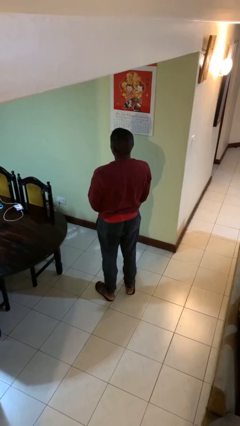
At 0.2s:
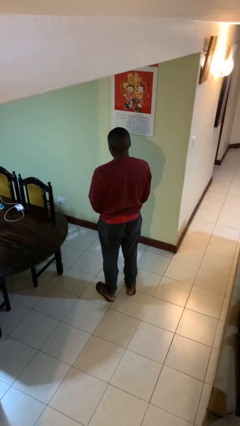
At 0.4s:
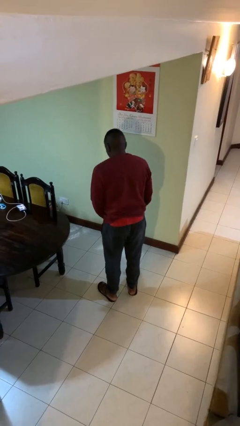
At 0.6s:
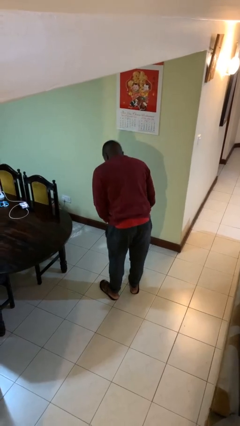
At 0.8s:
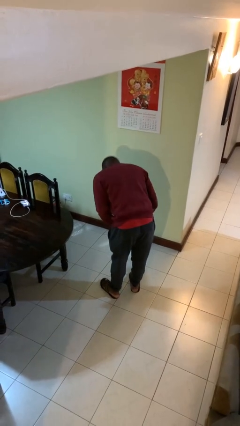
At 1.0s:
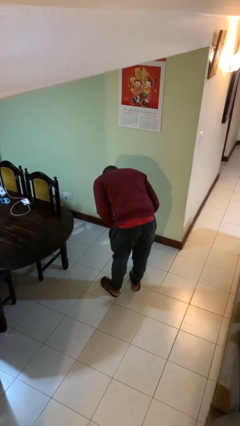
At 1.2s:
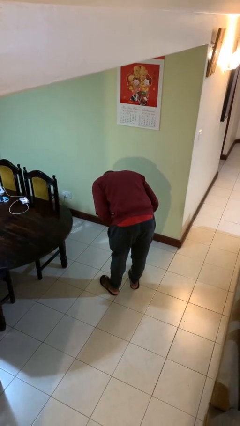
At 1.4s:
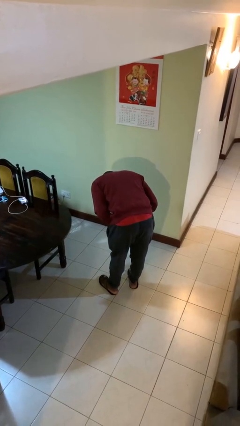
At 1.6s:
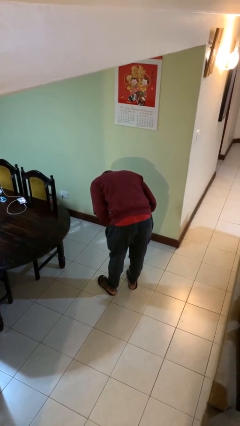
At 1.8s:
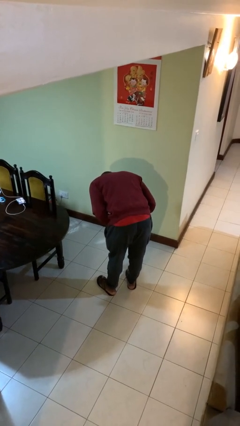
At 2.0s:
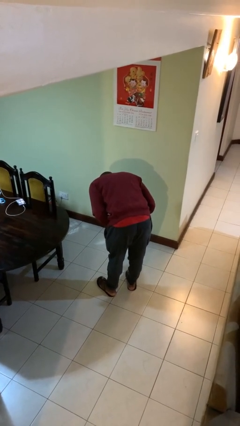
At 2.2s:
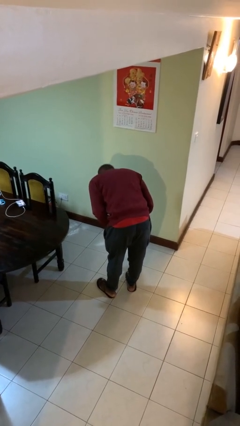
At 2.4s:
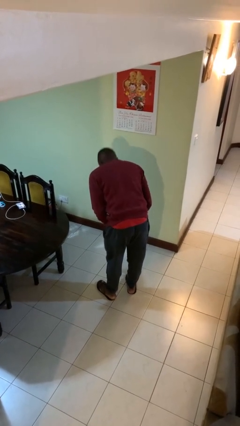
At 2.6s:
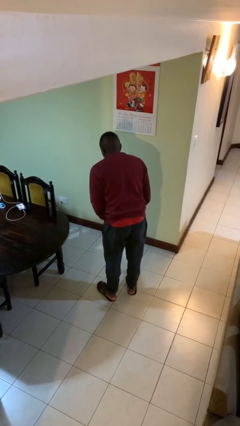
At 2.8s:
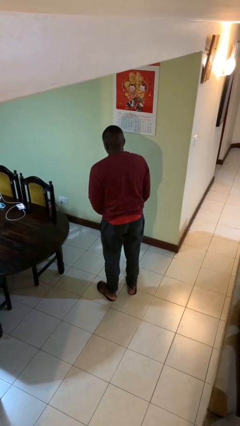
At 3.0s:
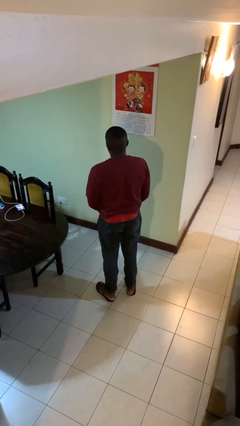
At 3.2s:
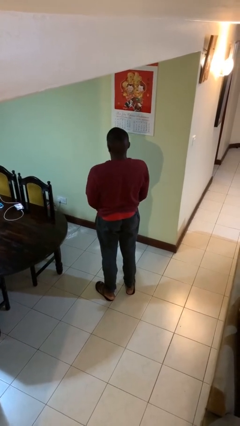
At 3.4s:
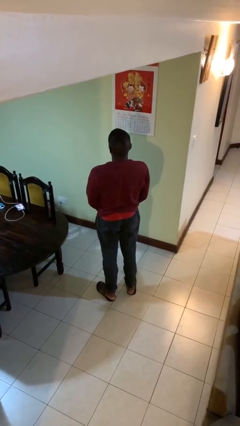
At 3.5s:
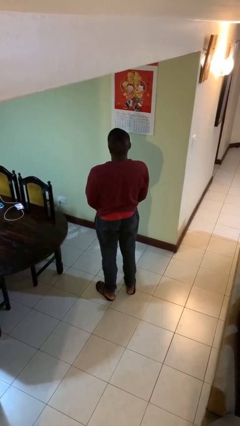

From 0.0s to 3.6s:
person bows

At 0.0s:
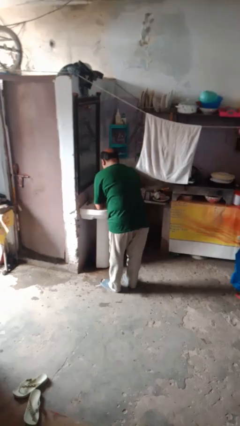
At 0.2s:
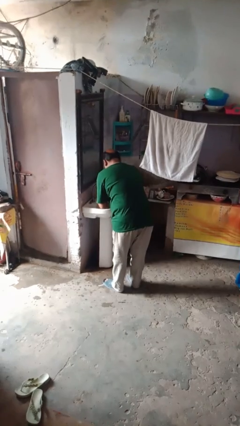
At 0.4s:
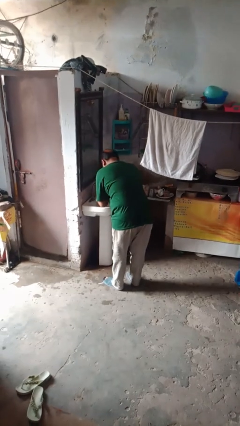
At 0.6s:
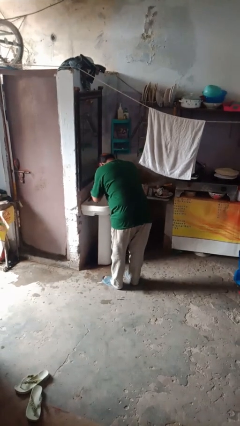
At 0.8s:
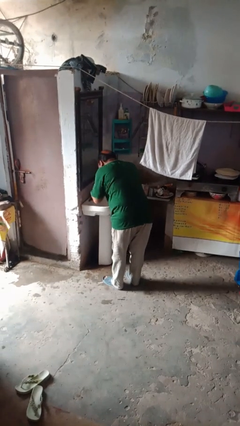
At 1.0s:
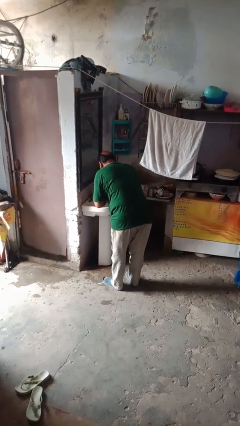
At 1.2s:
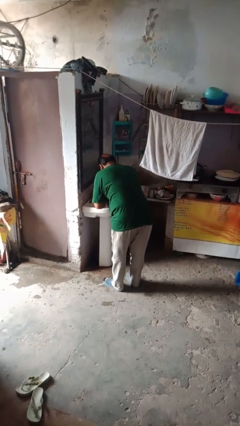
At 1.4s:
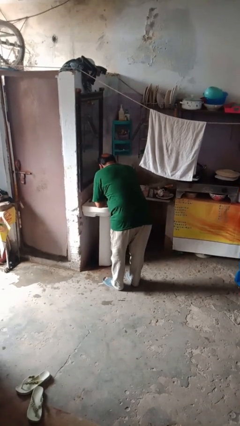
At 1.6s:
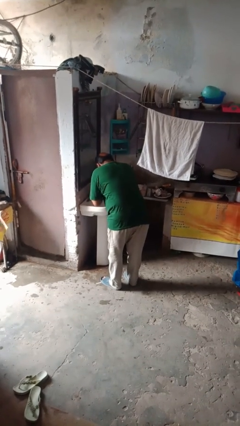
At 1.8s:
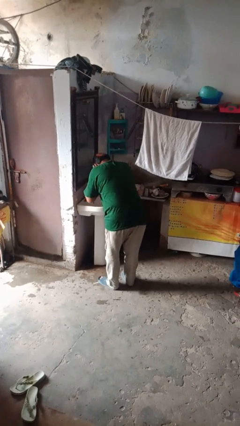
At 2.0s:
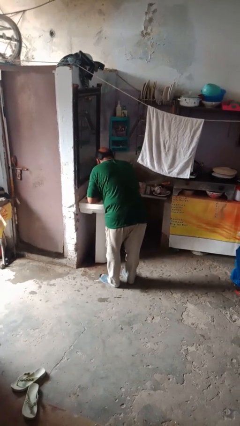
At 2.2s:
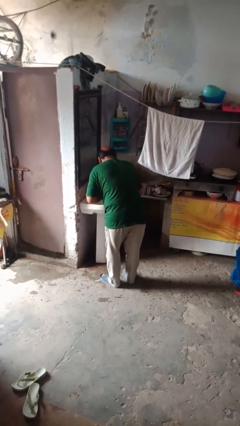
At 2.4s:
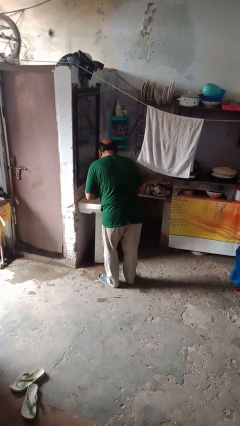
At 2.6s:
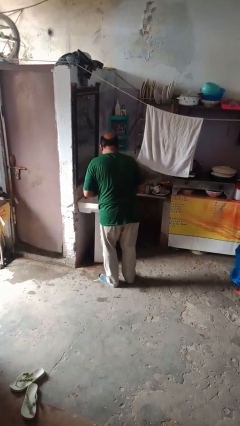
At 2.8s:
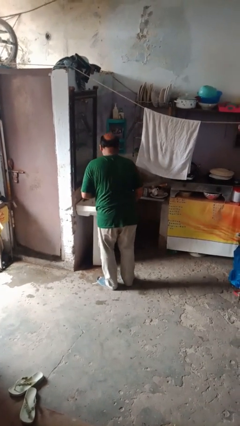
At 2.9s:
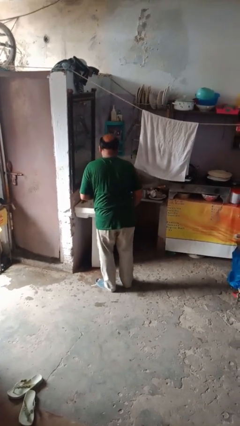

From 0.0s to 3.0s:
person washes face

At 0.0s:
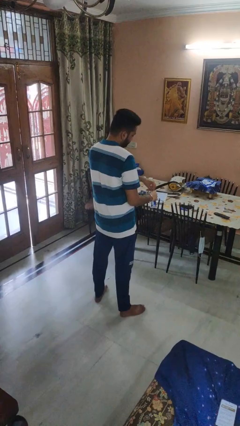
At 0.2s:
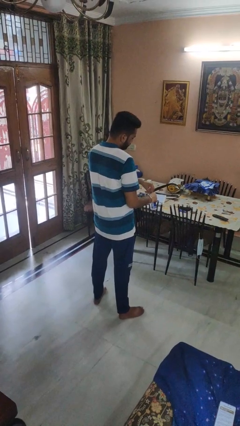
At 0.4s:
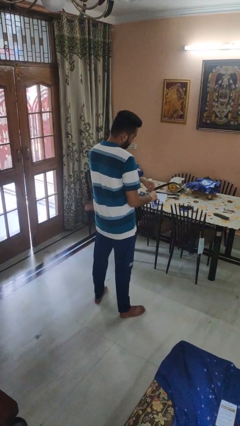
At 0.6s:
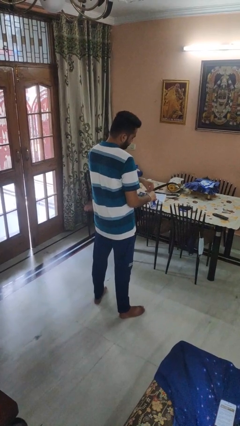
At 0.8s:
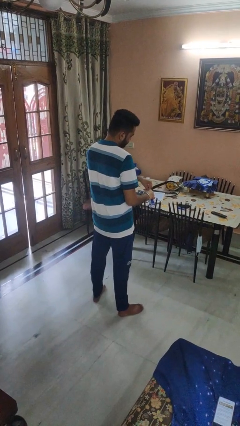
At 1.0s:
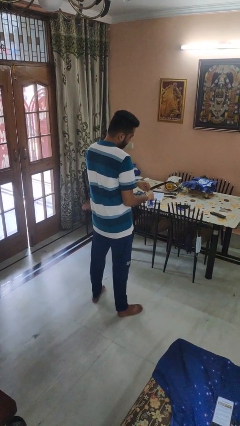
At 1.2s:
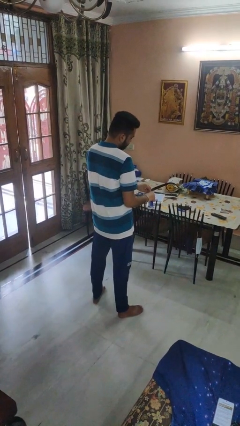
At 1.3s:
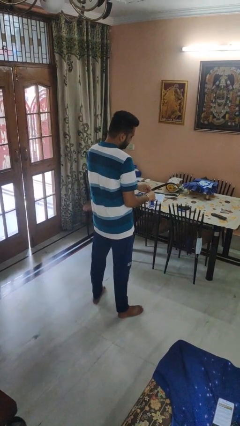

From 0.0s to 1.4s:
person opens beverage can

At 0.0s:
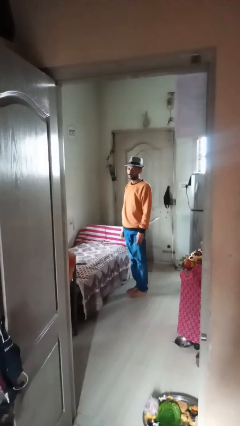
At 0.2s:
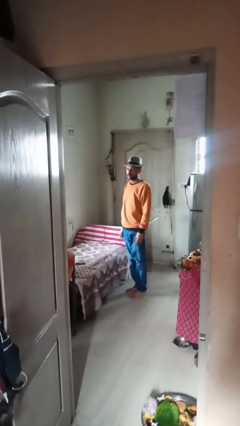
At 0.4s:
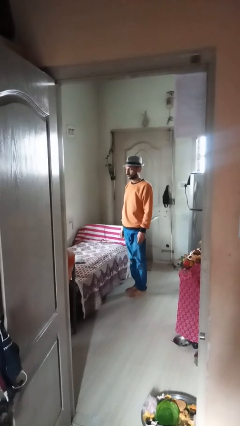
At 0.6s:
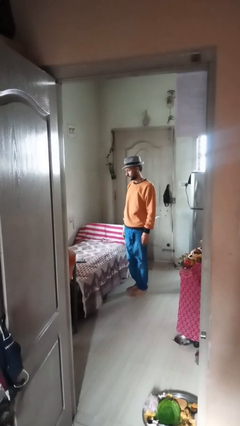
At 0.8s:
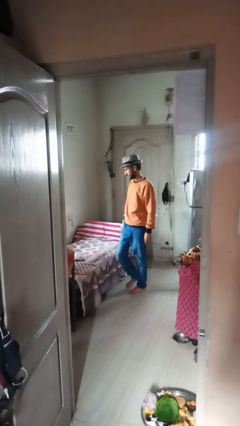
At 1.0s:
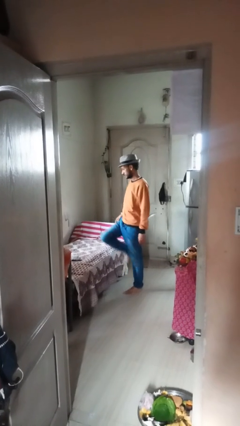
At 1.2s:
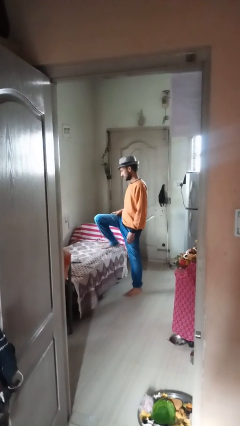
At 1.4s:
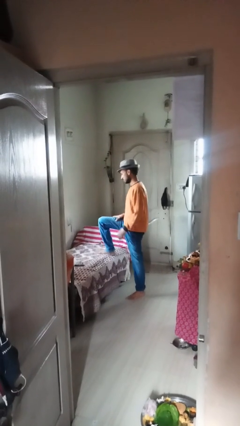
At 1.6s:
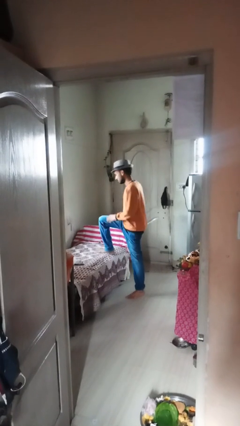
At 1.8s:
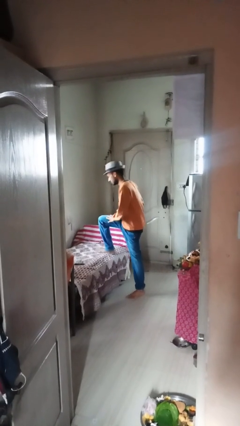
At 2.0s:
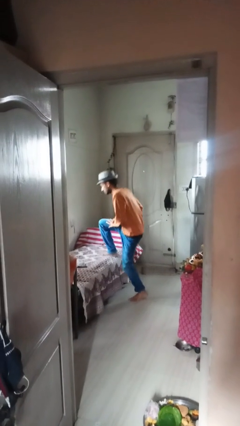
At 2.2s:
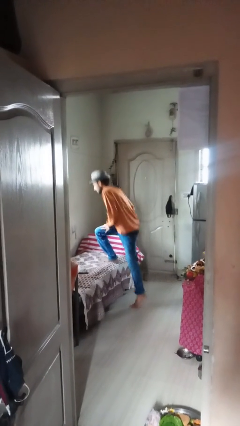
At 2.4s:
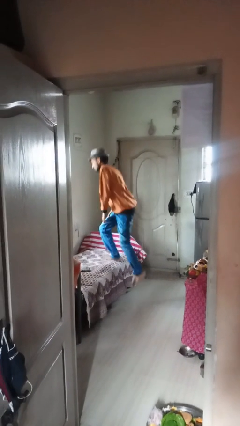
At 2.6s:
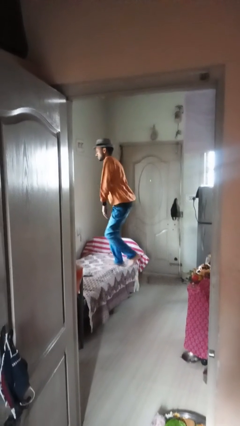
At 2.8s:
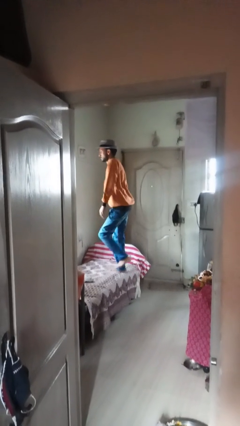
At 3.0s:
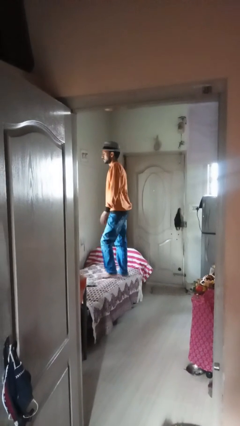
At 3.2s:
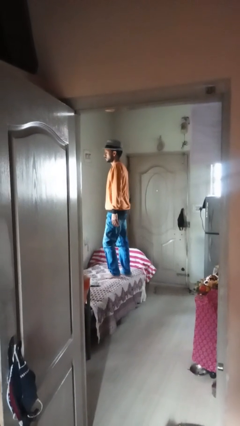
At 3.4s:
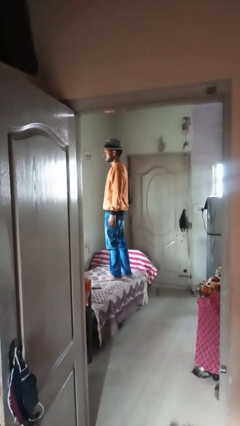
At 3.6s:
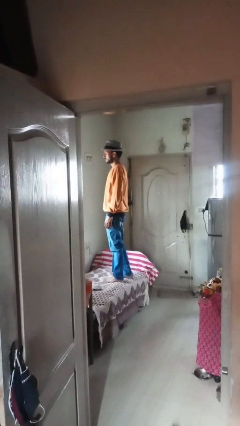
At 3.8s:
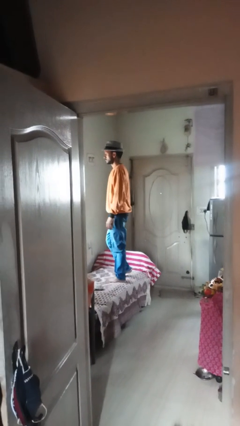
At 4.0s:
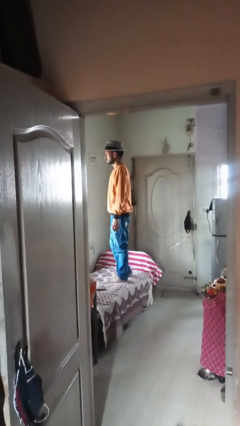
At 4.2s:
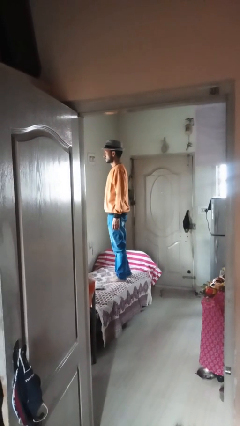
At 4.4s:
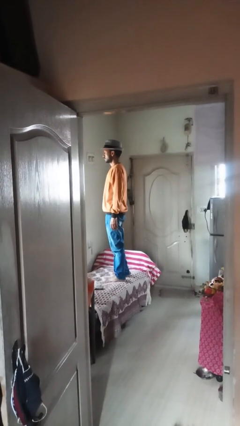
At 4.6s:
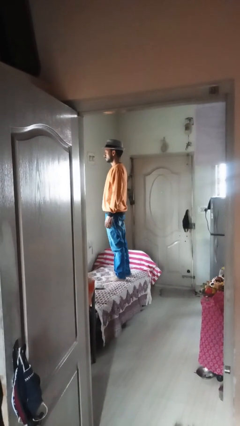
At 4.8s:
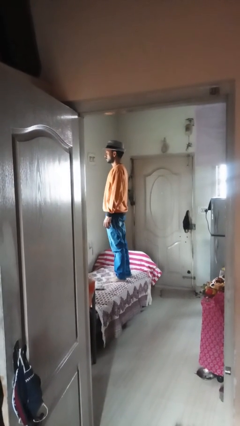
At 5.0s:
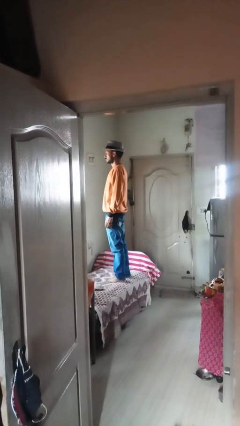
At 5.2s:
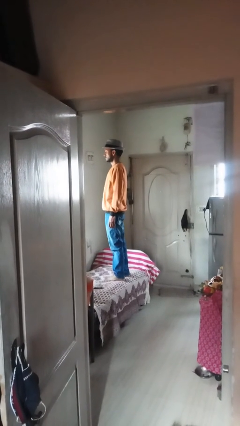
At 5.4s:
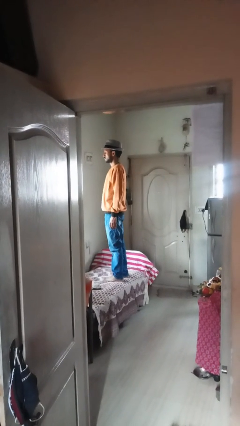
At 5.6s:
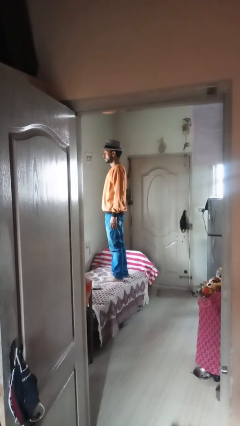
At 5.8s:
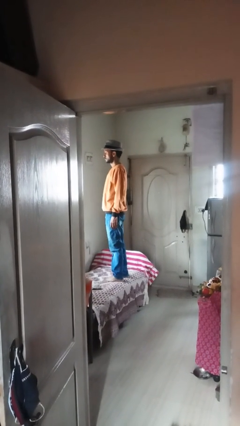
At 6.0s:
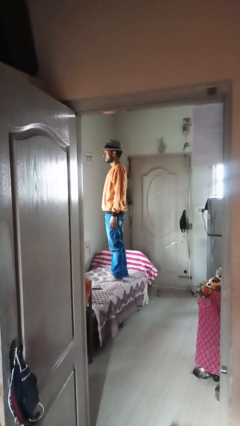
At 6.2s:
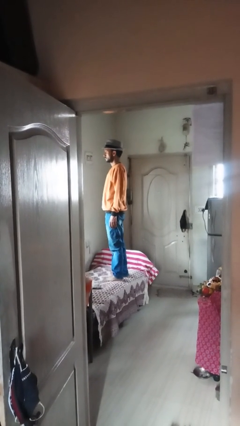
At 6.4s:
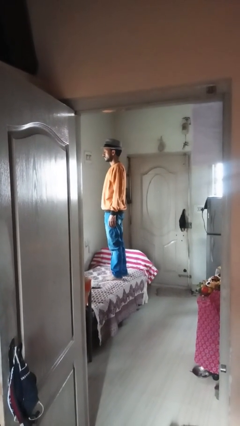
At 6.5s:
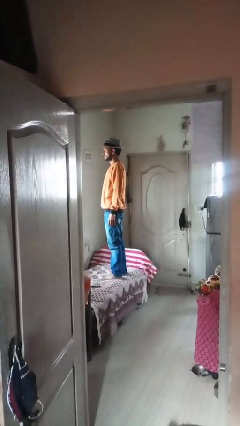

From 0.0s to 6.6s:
person climbs on couch

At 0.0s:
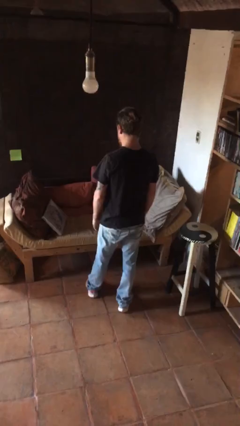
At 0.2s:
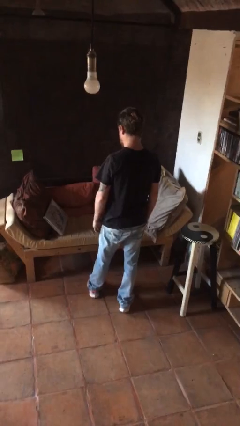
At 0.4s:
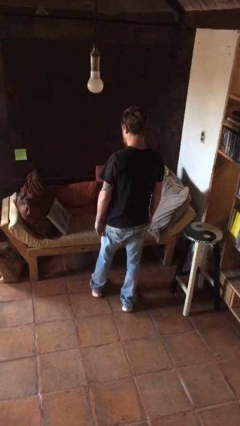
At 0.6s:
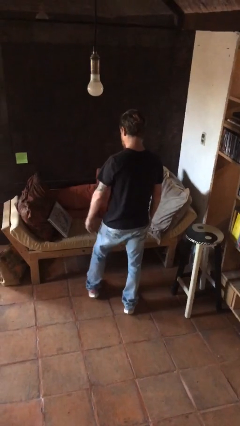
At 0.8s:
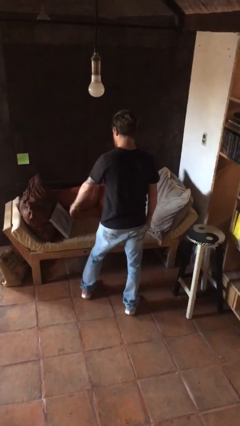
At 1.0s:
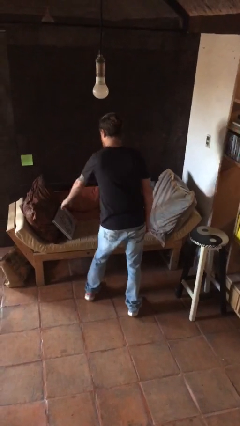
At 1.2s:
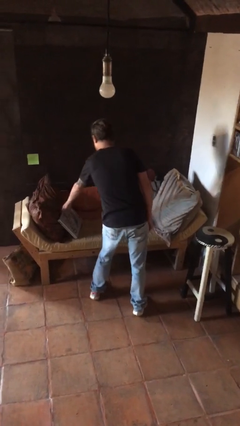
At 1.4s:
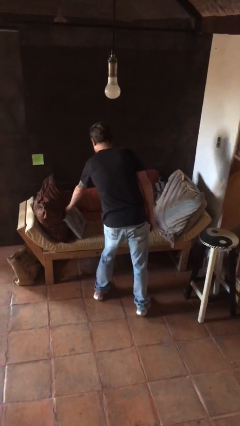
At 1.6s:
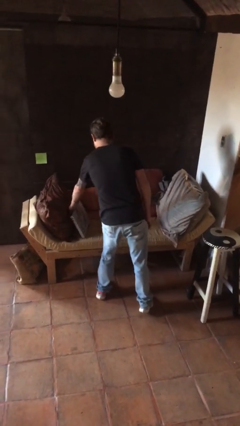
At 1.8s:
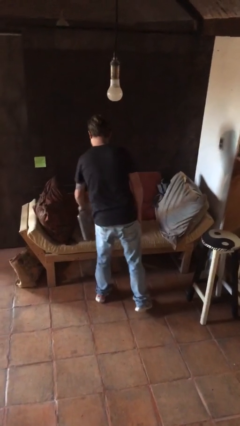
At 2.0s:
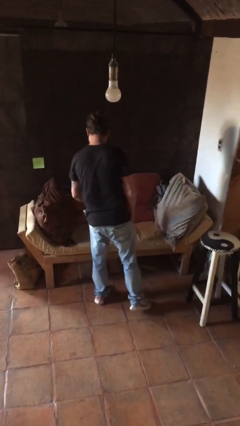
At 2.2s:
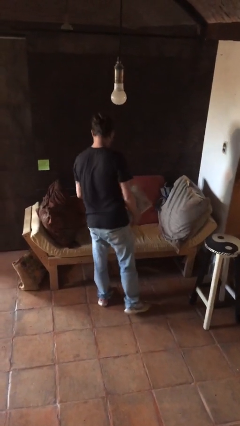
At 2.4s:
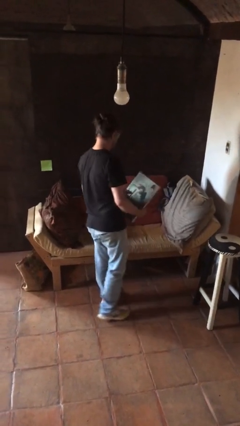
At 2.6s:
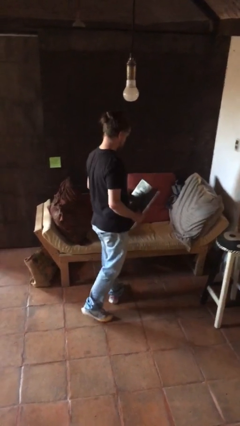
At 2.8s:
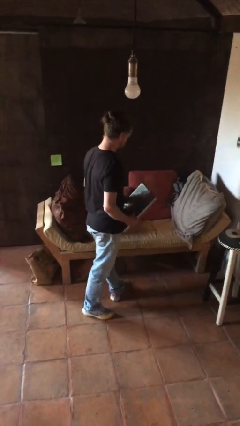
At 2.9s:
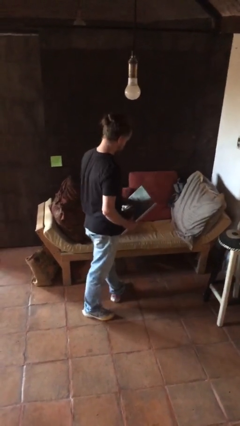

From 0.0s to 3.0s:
person picks up object from couch
